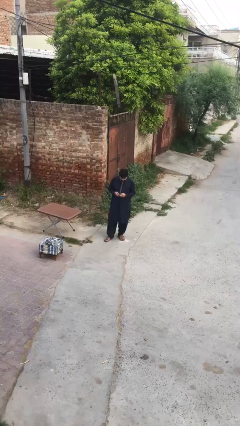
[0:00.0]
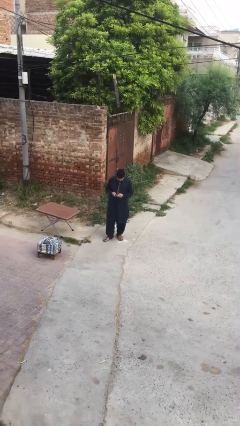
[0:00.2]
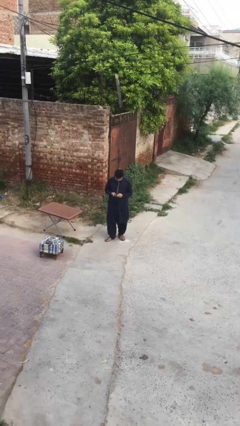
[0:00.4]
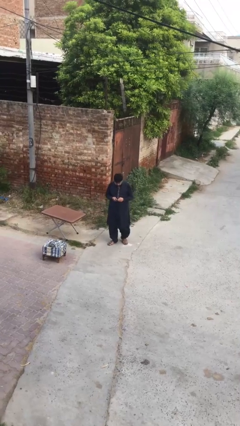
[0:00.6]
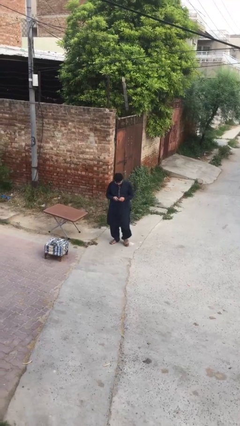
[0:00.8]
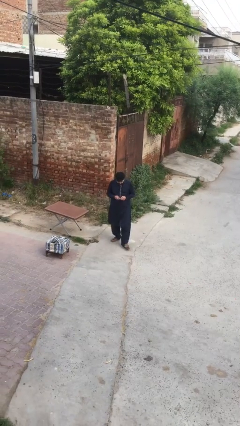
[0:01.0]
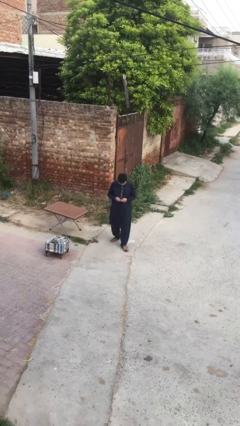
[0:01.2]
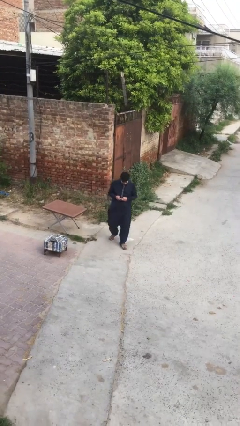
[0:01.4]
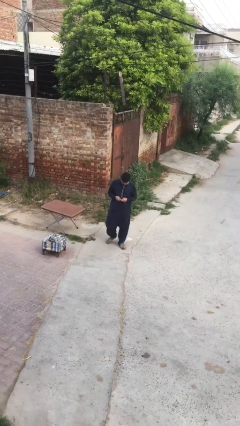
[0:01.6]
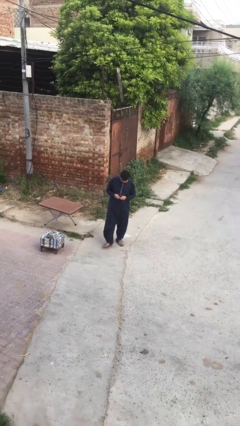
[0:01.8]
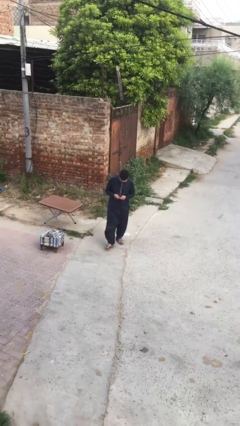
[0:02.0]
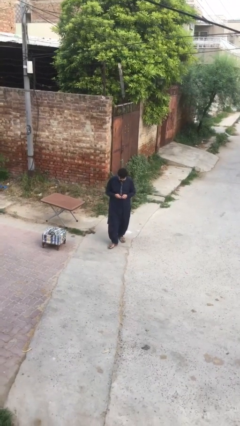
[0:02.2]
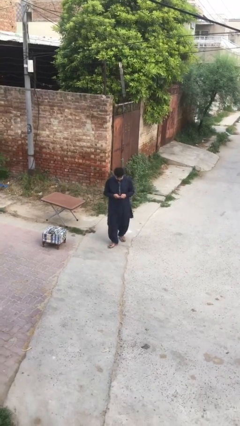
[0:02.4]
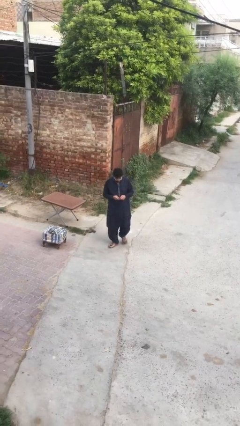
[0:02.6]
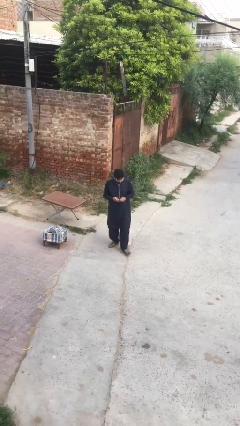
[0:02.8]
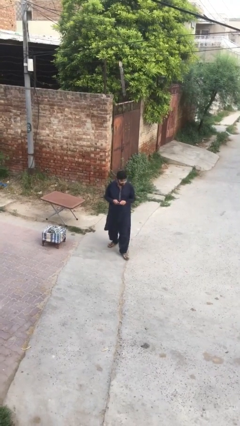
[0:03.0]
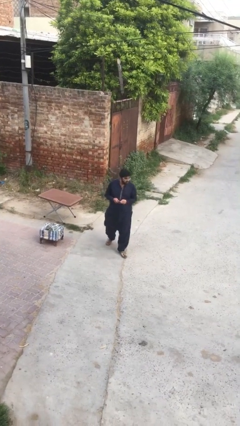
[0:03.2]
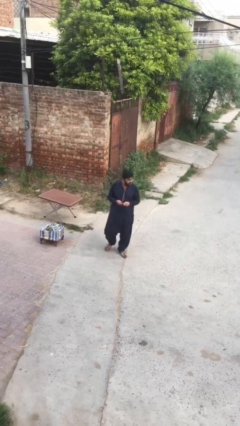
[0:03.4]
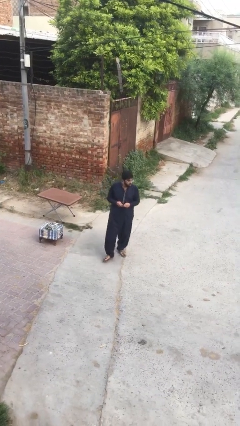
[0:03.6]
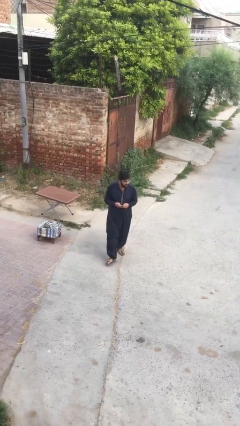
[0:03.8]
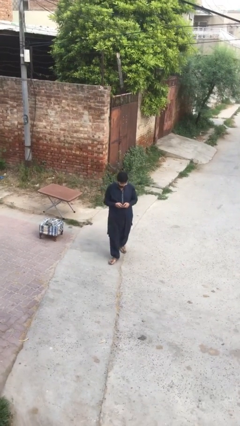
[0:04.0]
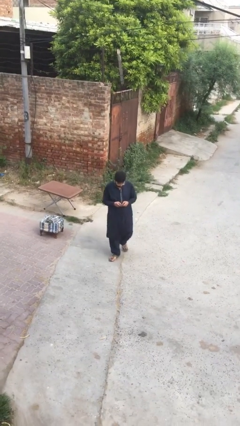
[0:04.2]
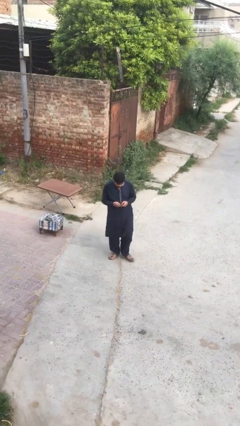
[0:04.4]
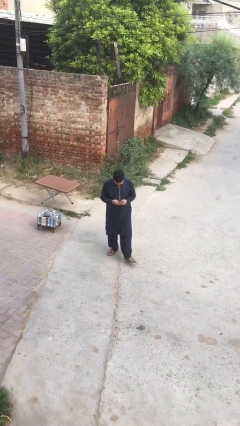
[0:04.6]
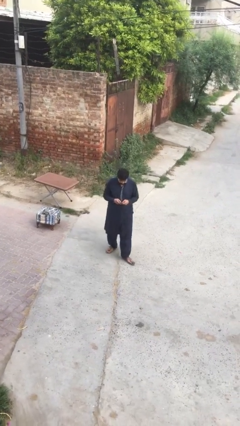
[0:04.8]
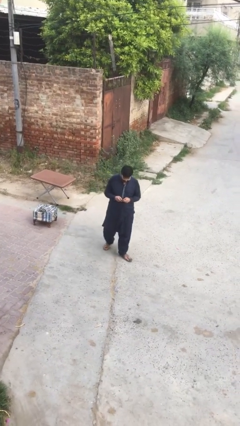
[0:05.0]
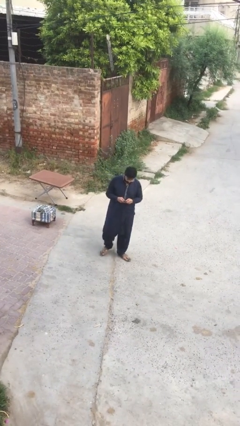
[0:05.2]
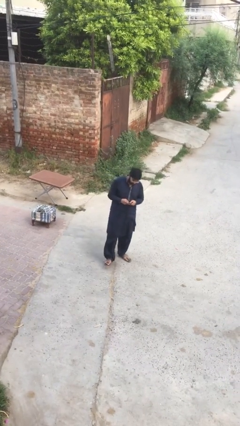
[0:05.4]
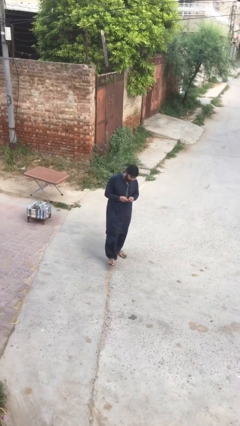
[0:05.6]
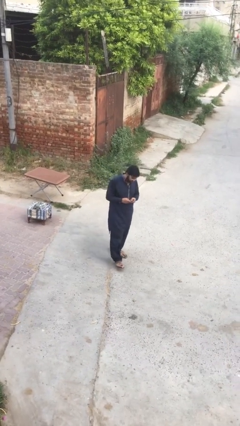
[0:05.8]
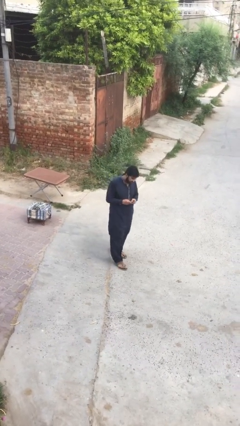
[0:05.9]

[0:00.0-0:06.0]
person texts on phone

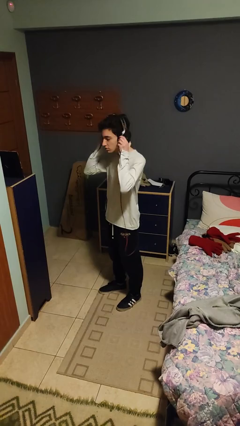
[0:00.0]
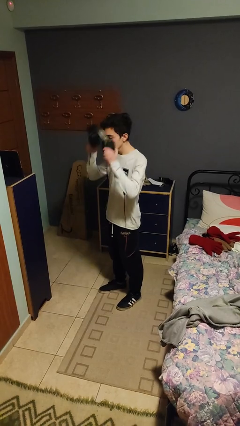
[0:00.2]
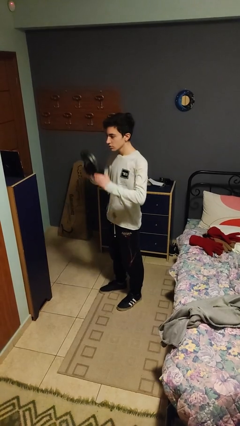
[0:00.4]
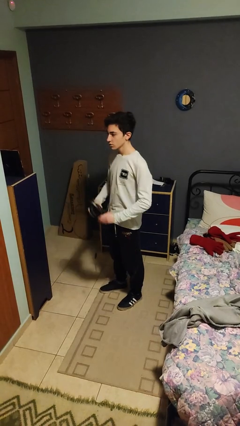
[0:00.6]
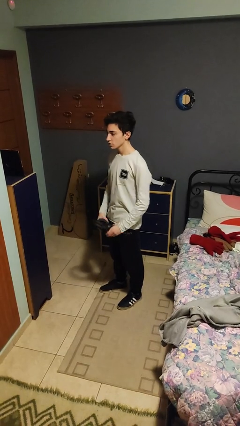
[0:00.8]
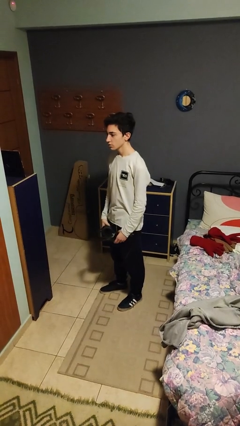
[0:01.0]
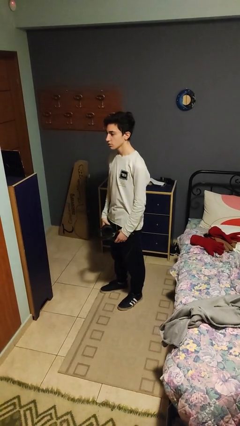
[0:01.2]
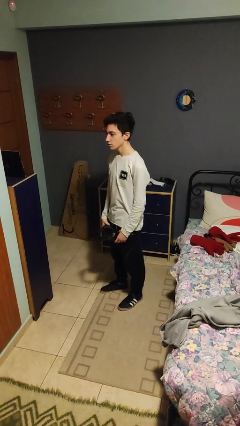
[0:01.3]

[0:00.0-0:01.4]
person takes off headphones

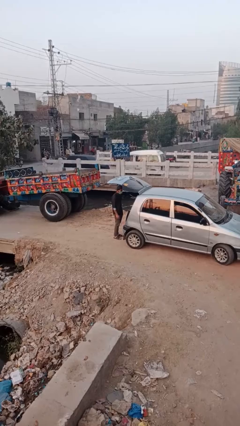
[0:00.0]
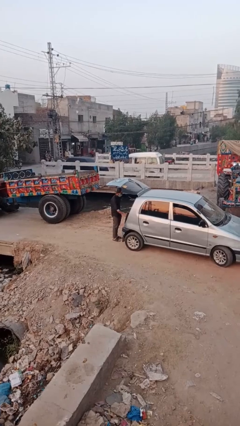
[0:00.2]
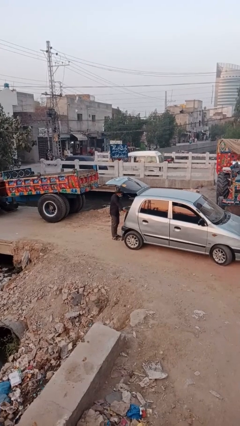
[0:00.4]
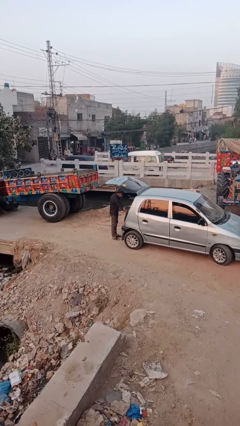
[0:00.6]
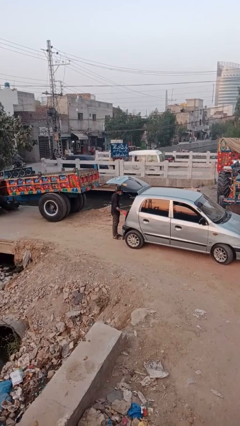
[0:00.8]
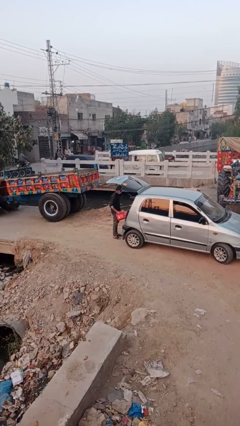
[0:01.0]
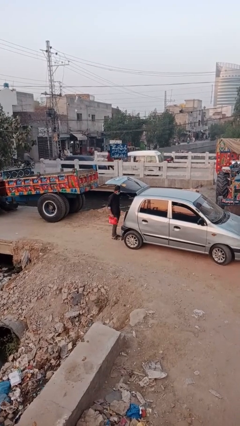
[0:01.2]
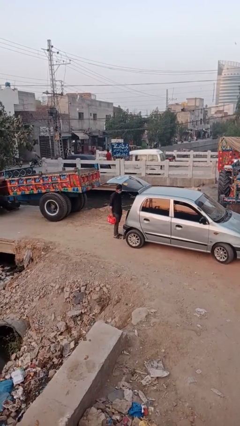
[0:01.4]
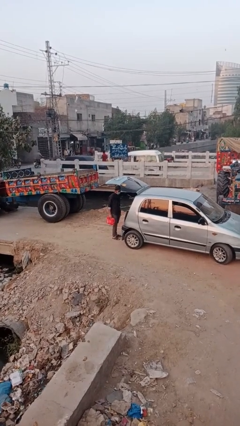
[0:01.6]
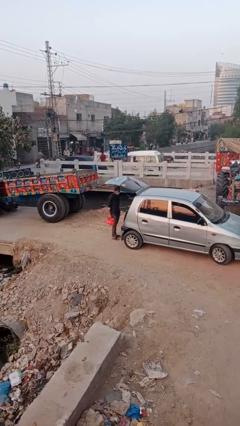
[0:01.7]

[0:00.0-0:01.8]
person unloads car

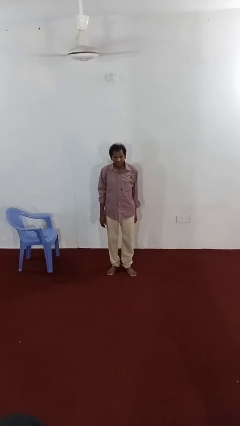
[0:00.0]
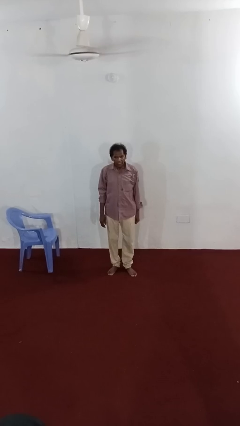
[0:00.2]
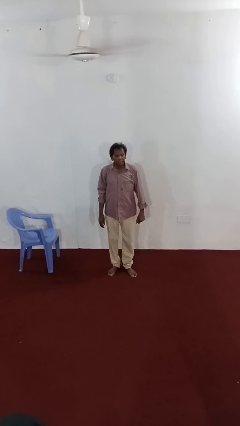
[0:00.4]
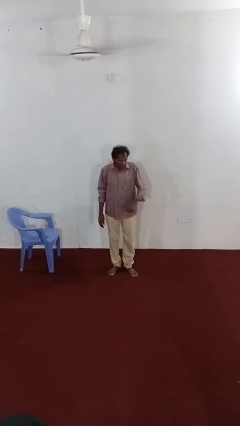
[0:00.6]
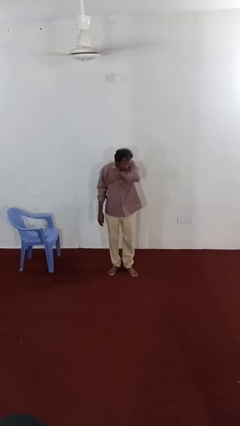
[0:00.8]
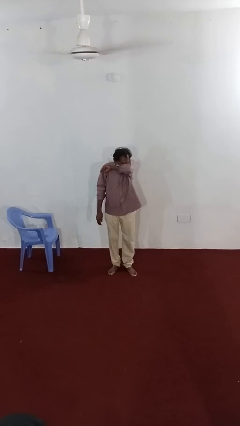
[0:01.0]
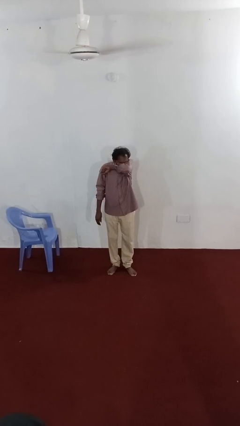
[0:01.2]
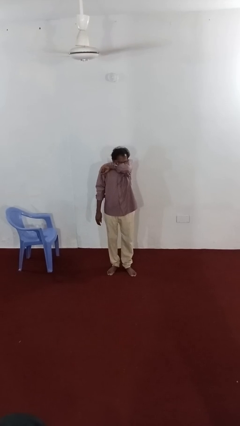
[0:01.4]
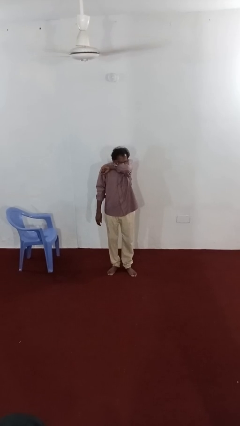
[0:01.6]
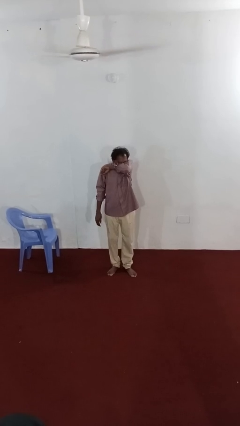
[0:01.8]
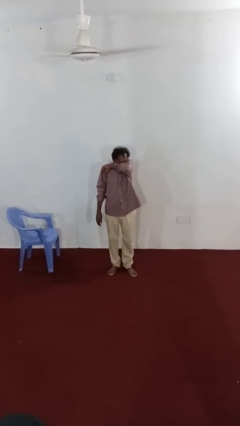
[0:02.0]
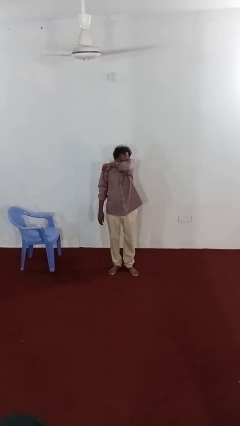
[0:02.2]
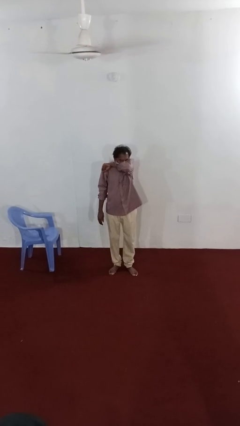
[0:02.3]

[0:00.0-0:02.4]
person sneezes into arm

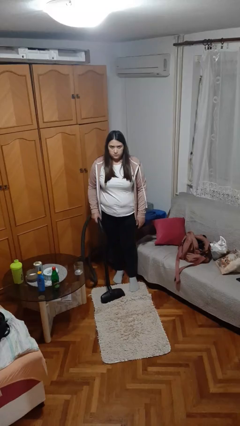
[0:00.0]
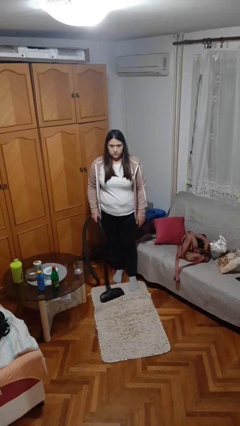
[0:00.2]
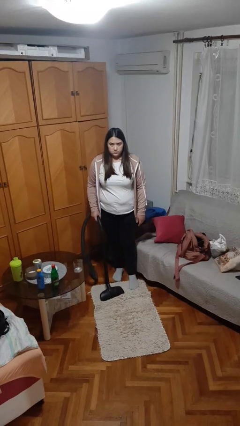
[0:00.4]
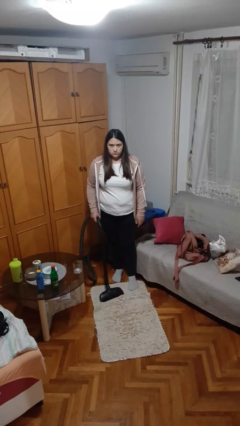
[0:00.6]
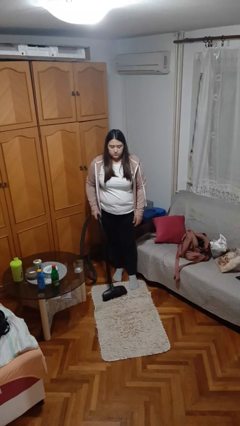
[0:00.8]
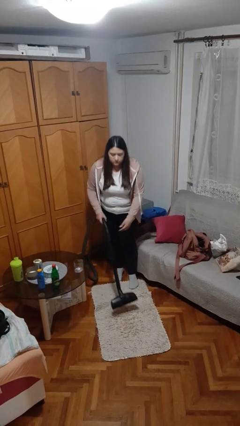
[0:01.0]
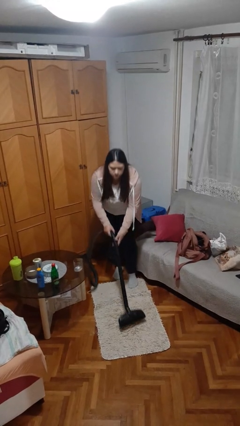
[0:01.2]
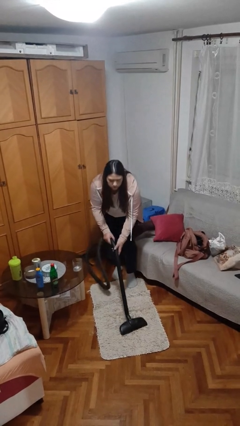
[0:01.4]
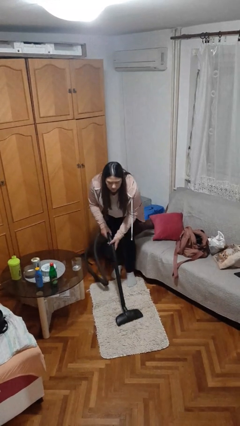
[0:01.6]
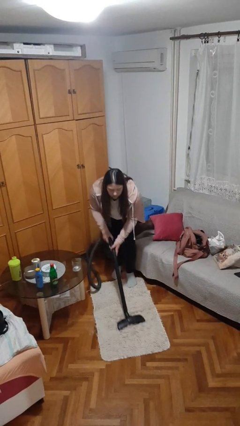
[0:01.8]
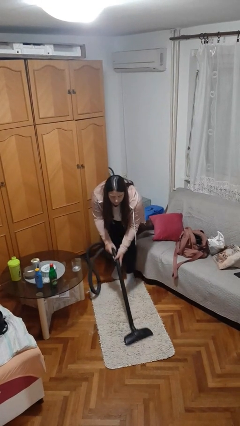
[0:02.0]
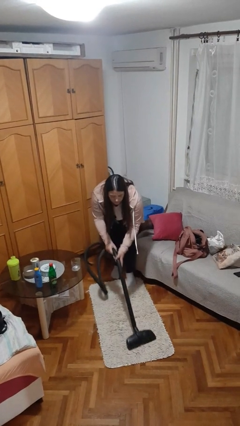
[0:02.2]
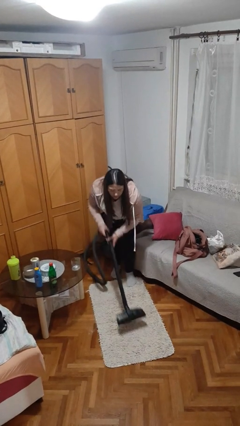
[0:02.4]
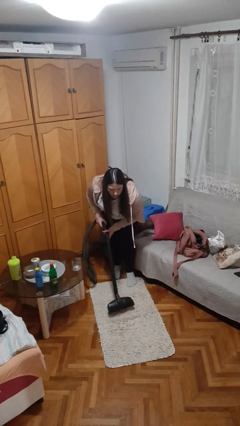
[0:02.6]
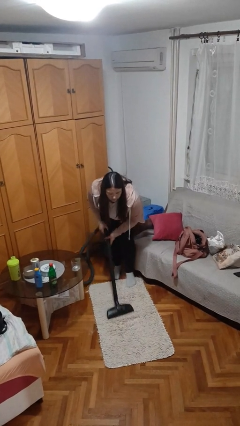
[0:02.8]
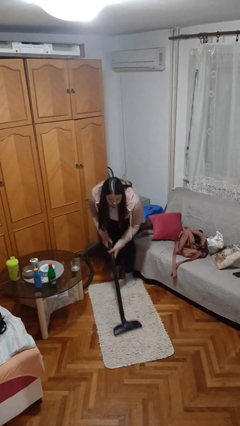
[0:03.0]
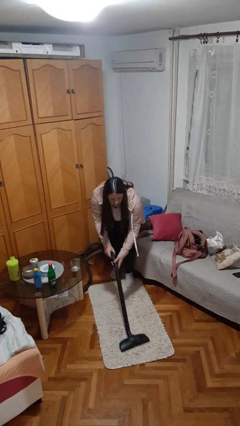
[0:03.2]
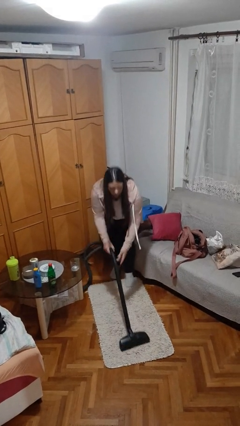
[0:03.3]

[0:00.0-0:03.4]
person vacuums carpet

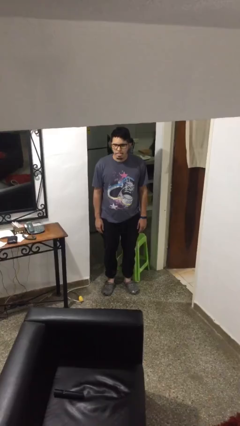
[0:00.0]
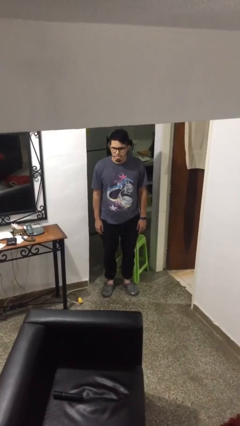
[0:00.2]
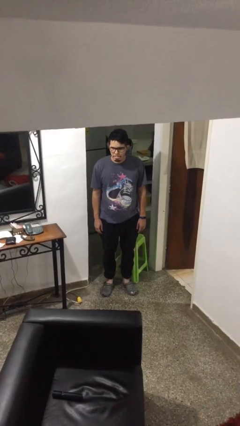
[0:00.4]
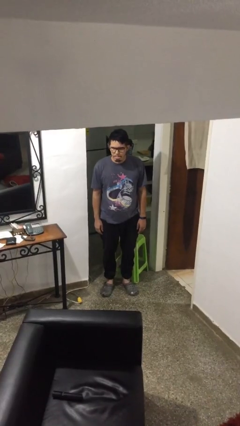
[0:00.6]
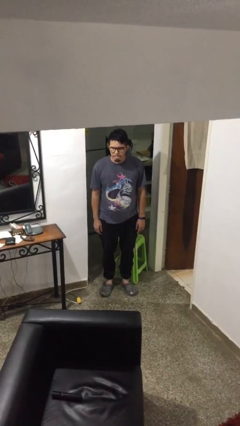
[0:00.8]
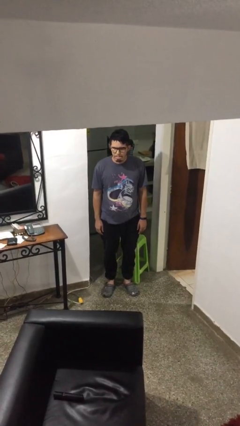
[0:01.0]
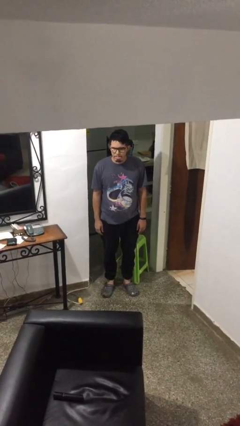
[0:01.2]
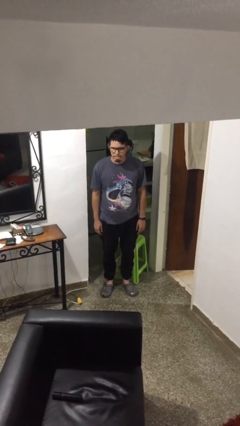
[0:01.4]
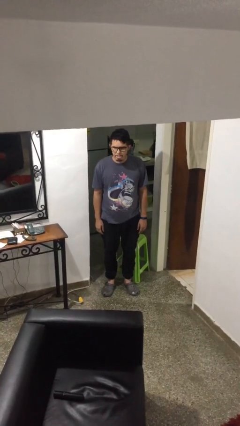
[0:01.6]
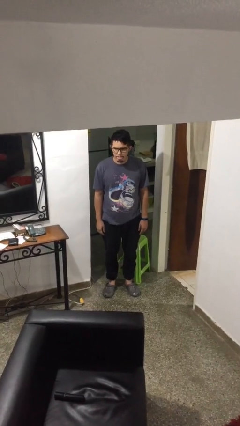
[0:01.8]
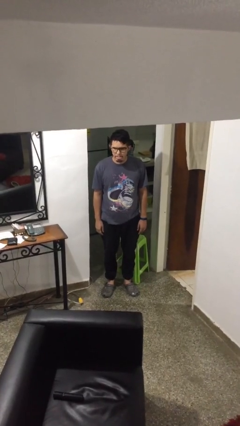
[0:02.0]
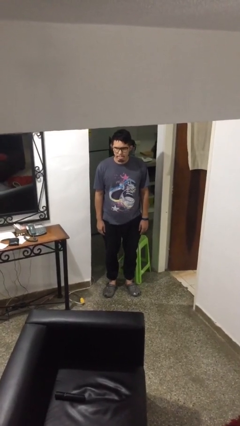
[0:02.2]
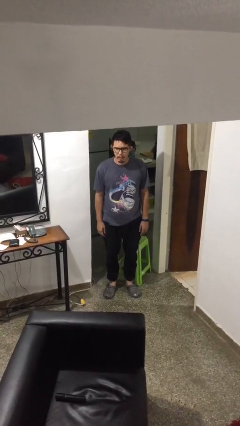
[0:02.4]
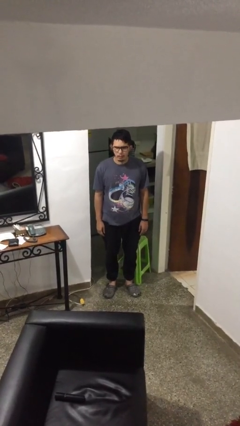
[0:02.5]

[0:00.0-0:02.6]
person sticks out tongue
